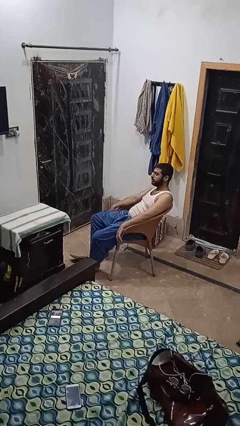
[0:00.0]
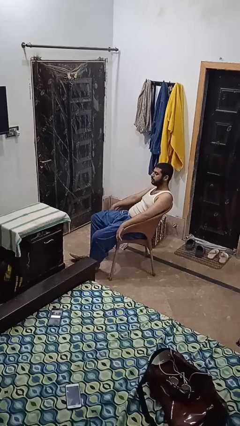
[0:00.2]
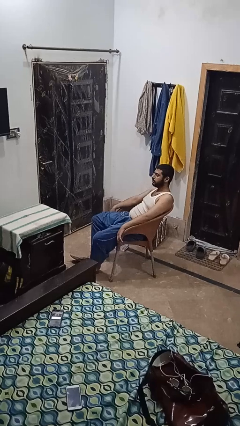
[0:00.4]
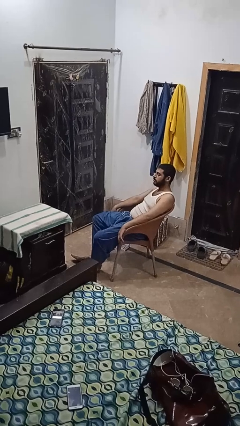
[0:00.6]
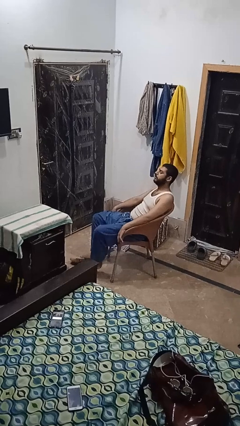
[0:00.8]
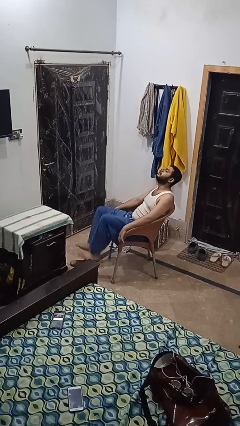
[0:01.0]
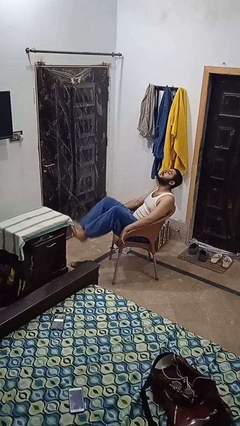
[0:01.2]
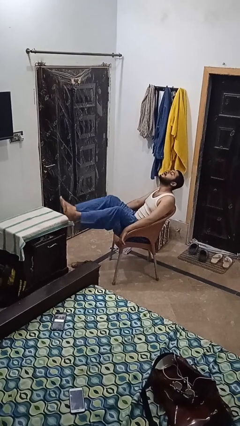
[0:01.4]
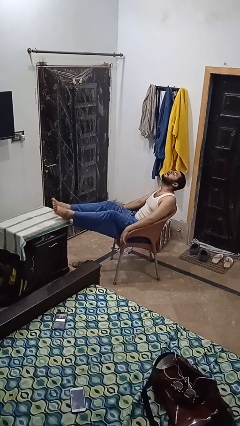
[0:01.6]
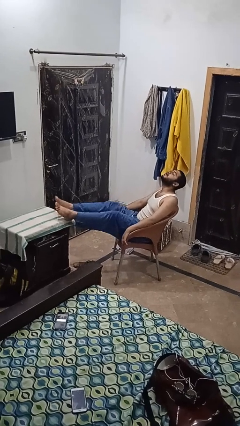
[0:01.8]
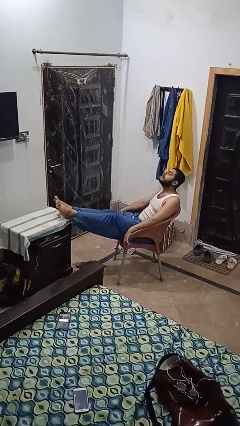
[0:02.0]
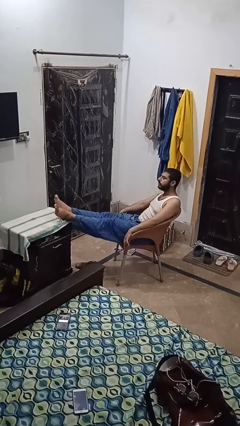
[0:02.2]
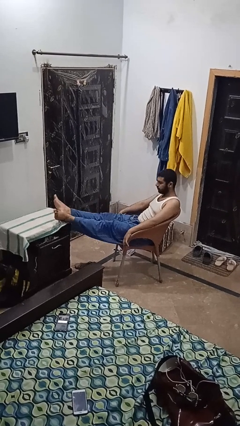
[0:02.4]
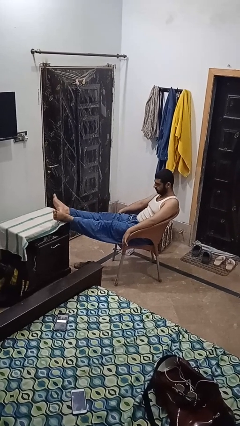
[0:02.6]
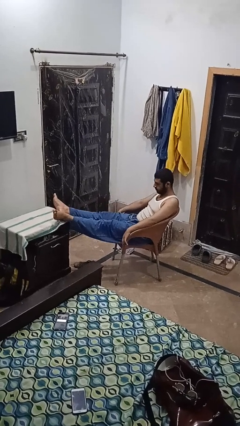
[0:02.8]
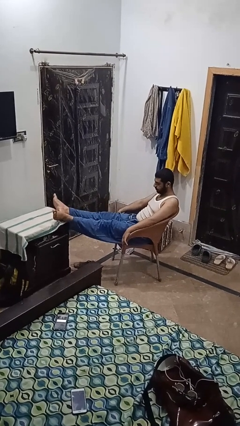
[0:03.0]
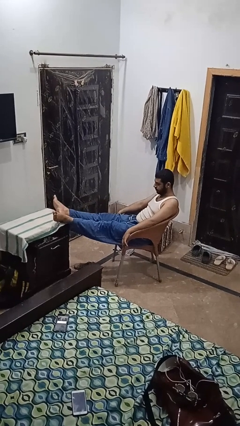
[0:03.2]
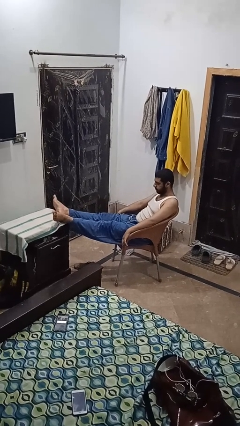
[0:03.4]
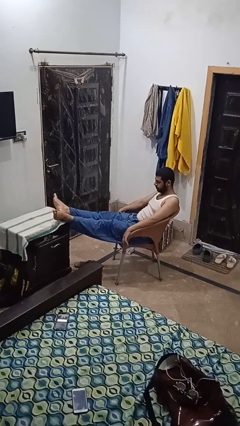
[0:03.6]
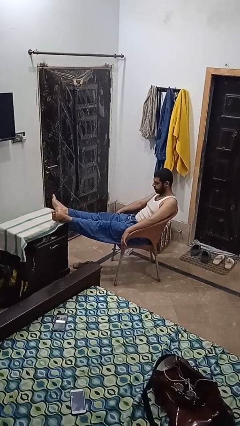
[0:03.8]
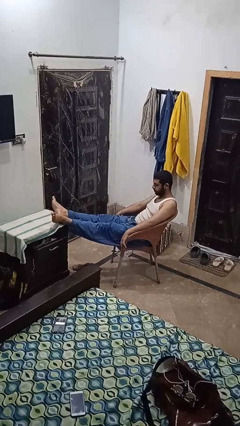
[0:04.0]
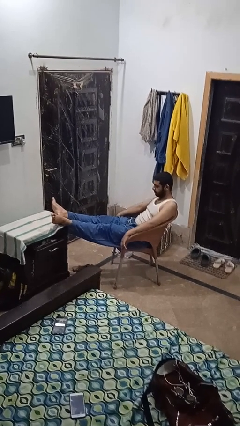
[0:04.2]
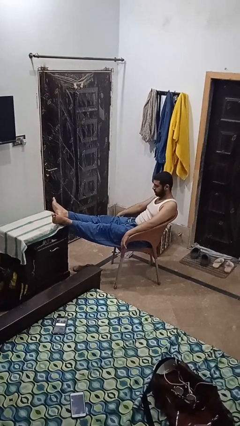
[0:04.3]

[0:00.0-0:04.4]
person puts feet up

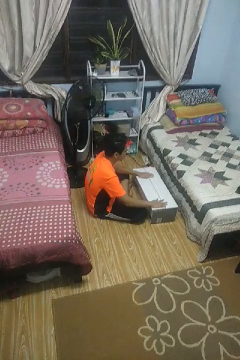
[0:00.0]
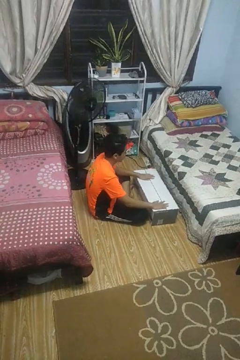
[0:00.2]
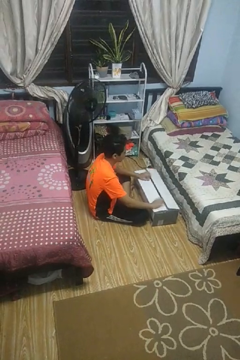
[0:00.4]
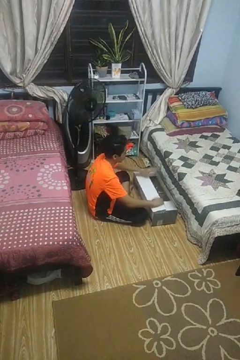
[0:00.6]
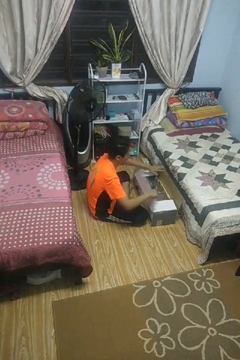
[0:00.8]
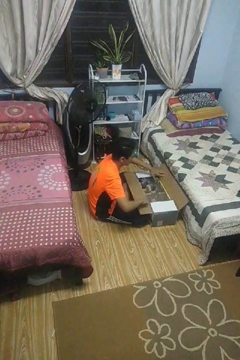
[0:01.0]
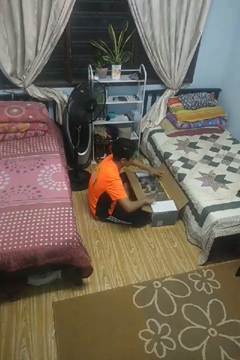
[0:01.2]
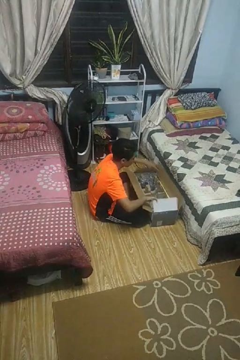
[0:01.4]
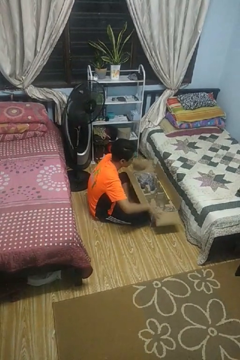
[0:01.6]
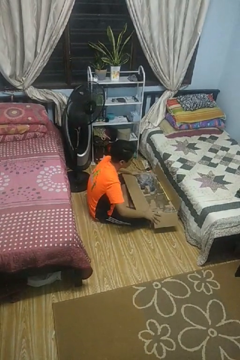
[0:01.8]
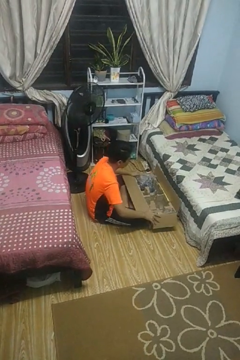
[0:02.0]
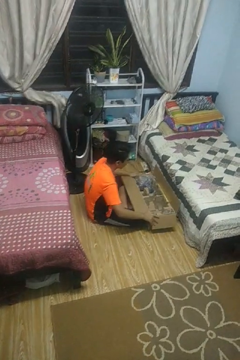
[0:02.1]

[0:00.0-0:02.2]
person opens box

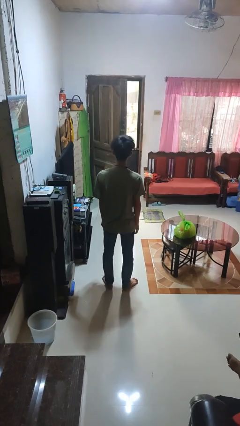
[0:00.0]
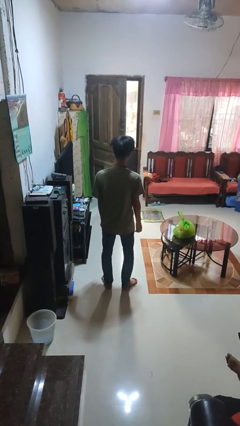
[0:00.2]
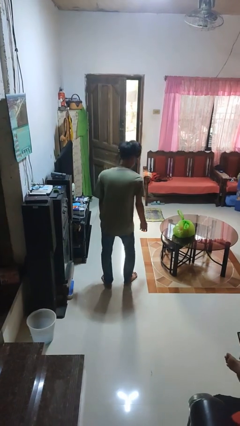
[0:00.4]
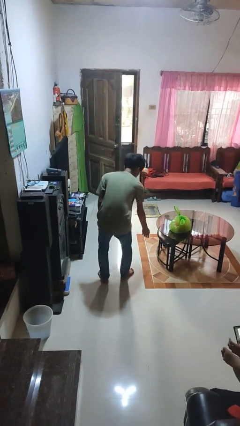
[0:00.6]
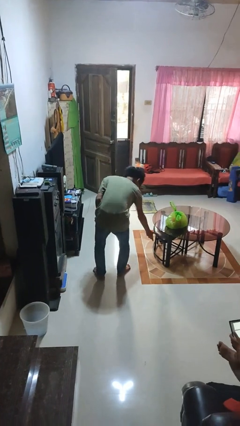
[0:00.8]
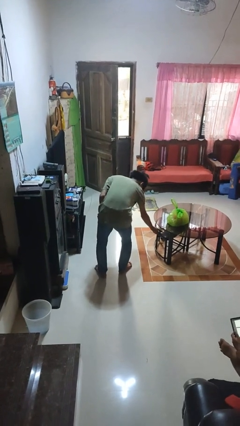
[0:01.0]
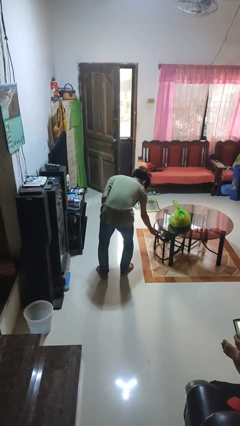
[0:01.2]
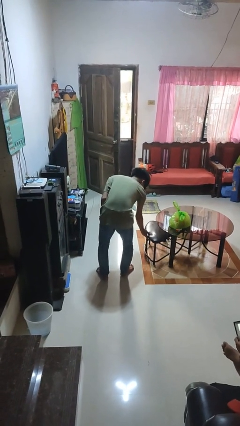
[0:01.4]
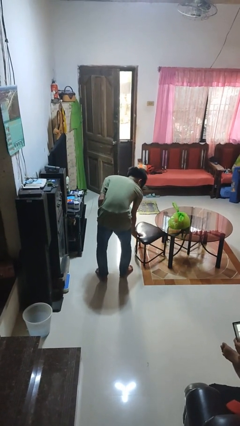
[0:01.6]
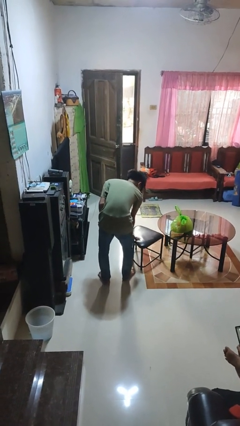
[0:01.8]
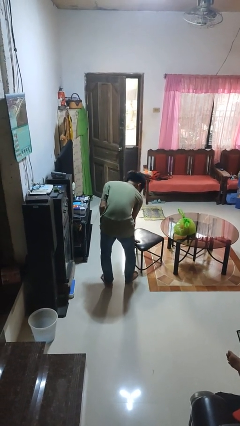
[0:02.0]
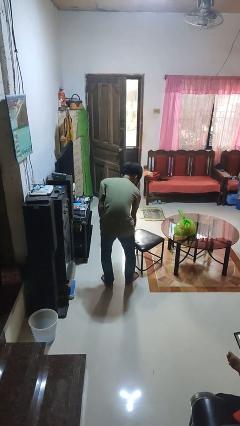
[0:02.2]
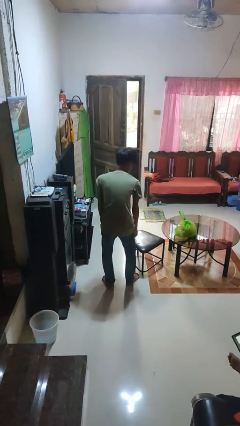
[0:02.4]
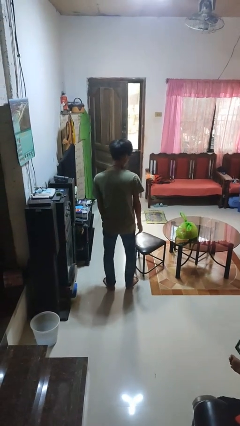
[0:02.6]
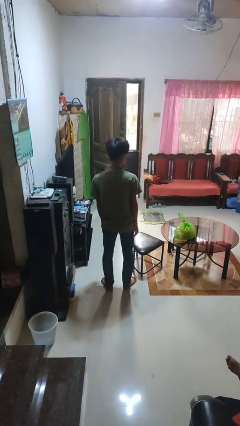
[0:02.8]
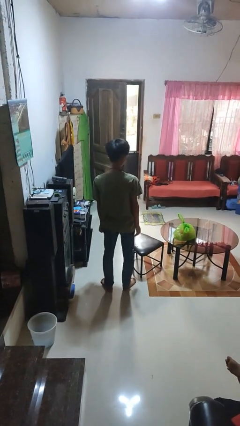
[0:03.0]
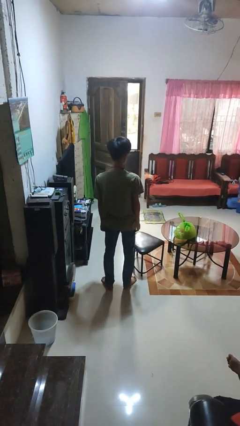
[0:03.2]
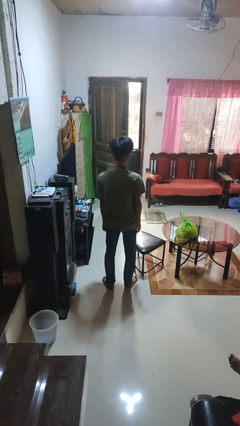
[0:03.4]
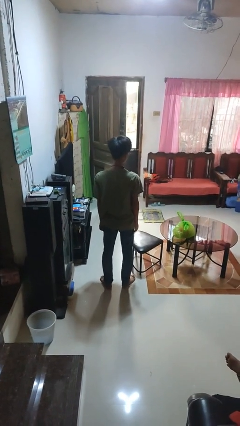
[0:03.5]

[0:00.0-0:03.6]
person pulls out chair

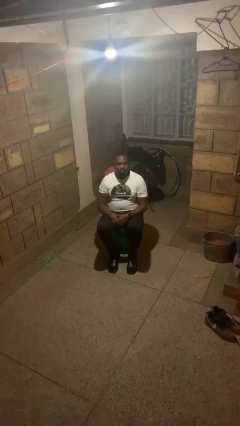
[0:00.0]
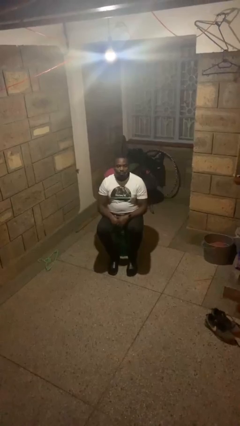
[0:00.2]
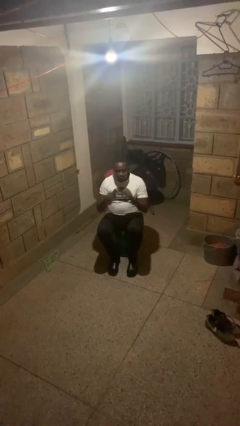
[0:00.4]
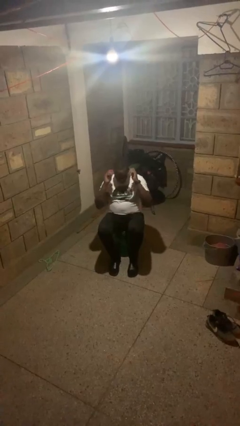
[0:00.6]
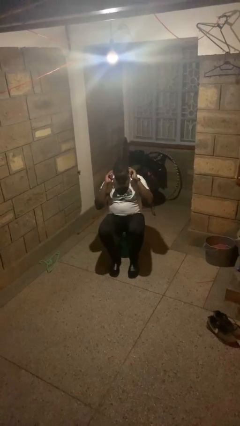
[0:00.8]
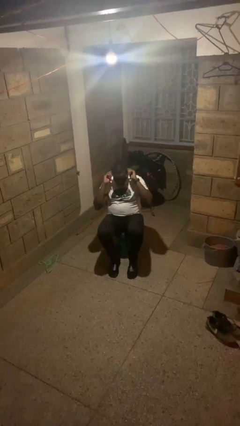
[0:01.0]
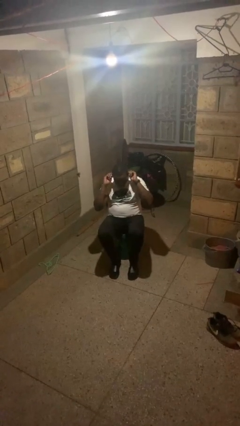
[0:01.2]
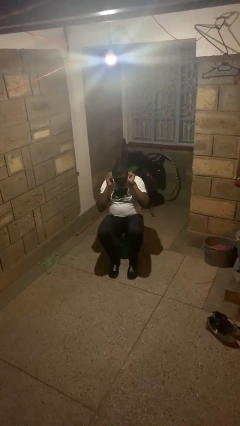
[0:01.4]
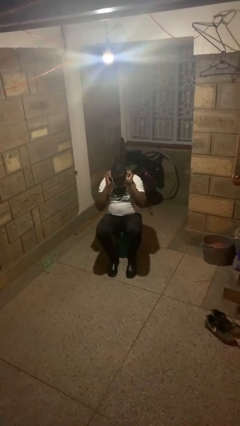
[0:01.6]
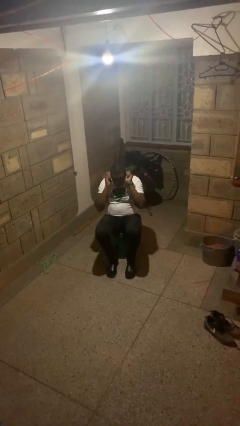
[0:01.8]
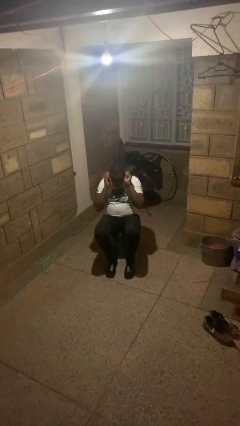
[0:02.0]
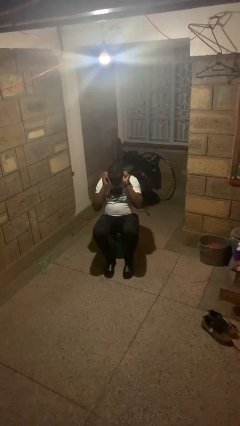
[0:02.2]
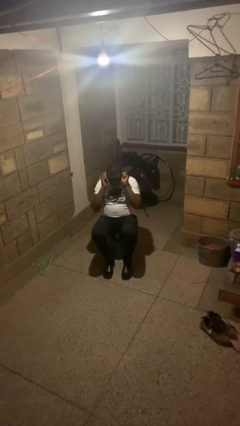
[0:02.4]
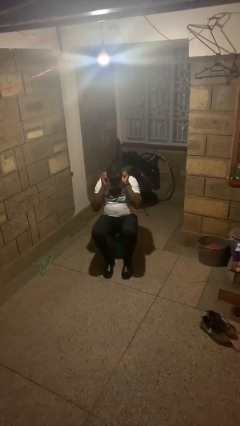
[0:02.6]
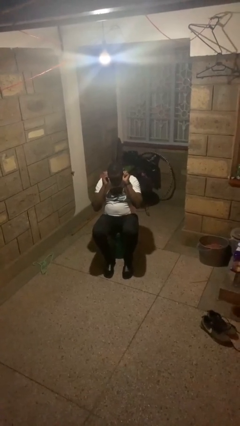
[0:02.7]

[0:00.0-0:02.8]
person touches earlobe

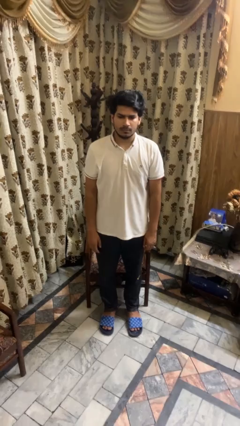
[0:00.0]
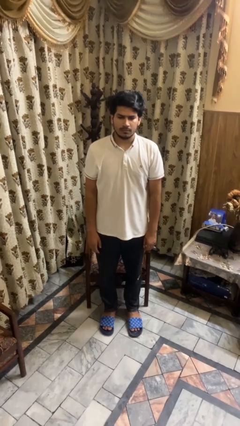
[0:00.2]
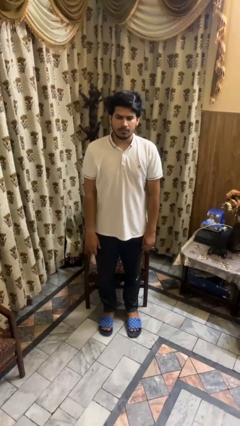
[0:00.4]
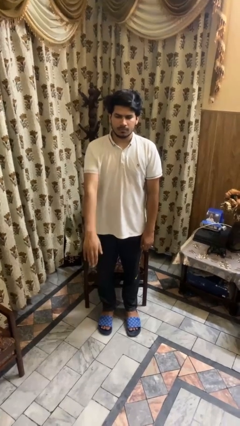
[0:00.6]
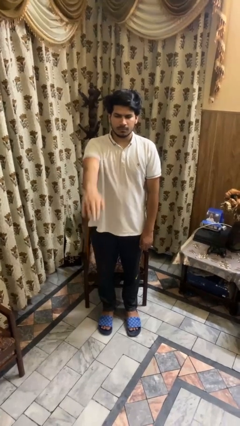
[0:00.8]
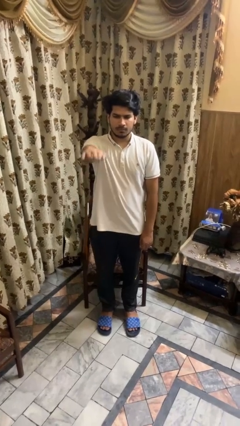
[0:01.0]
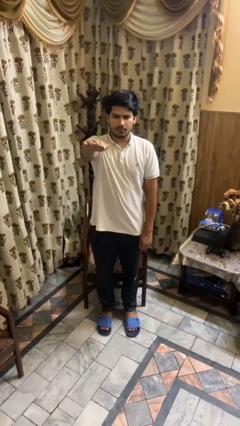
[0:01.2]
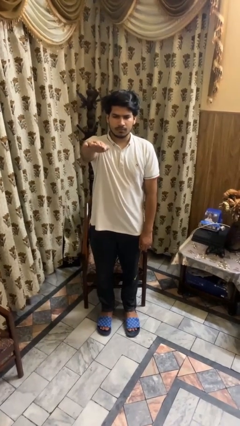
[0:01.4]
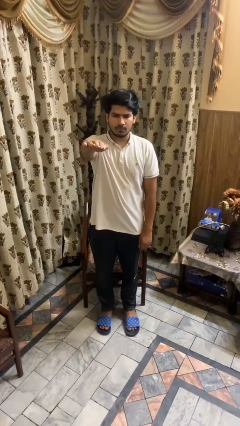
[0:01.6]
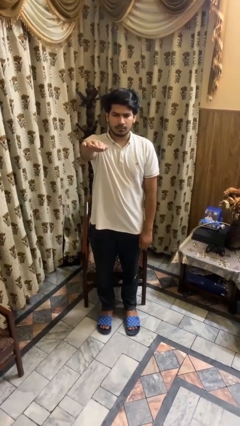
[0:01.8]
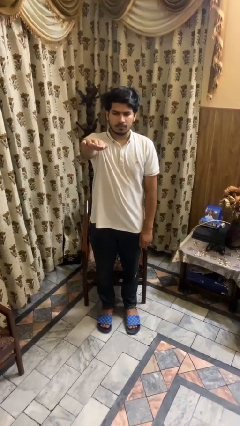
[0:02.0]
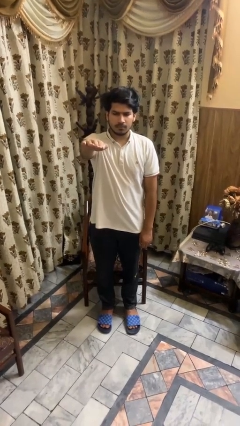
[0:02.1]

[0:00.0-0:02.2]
person gestures swipe up

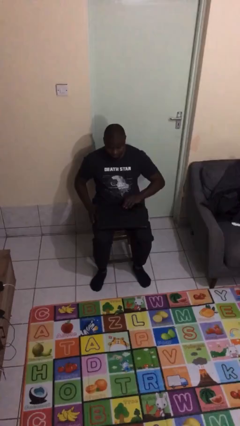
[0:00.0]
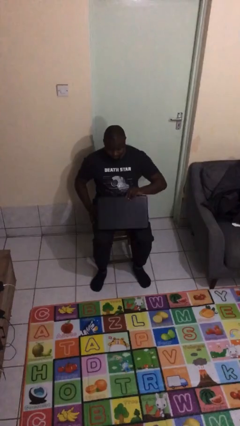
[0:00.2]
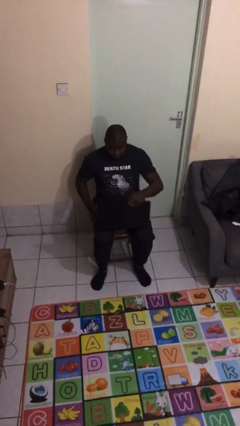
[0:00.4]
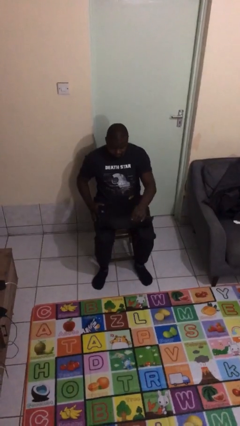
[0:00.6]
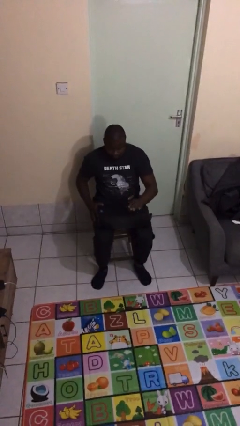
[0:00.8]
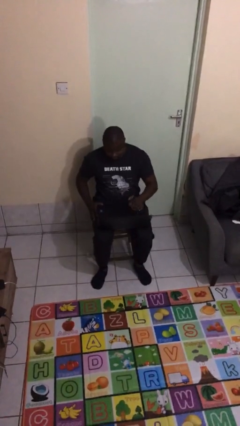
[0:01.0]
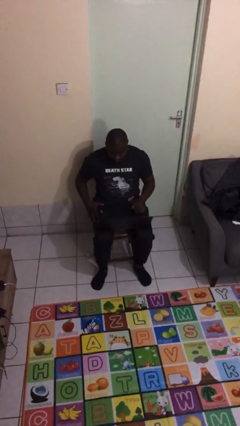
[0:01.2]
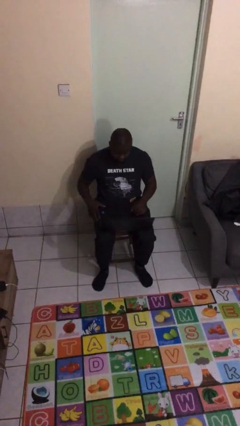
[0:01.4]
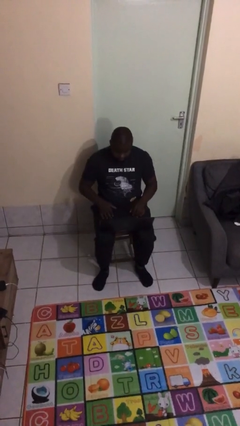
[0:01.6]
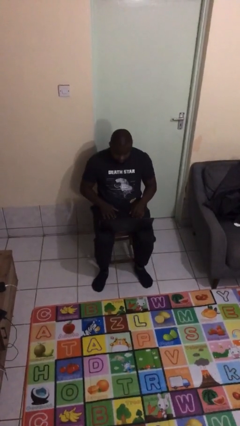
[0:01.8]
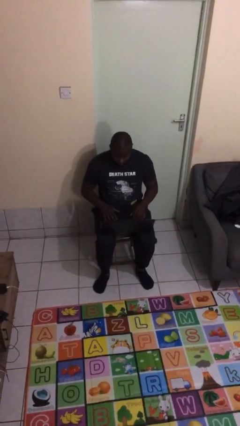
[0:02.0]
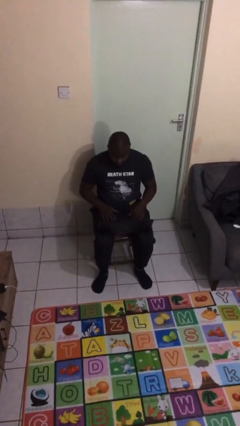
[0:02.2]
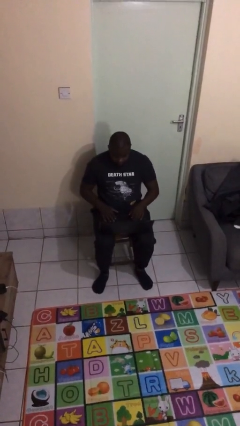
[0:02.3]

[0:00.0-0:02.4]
person opens laptop

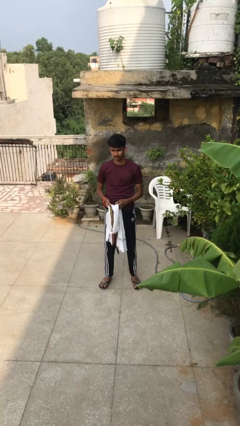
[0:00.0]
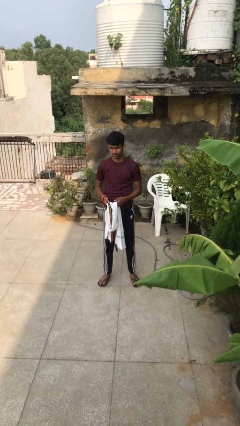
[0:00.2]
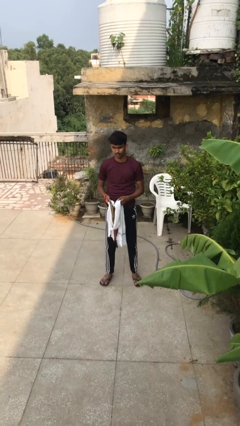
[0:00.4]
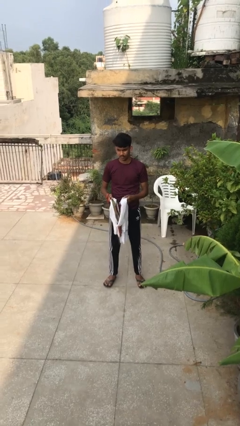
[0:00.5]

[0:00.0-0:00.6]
person takes off shoes
